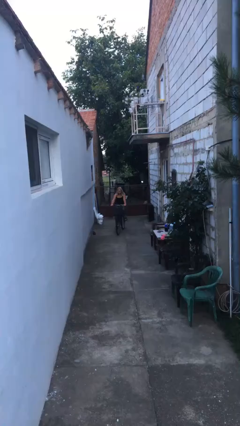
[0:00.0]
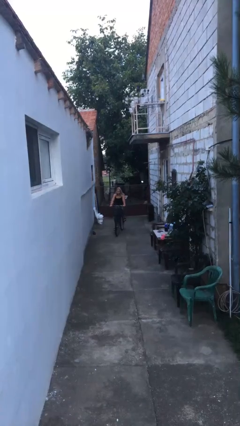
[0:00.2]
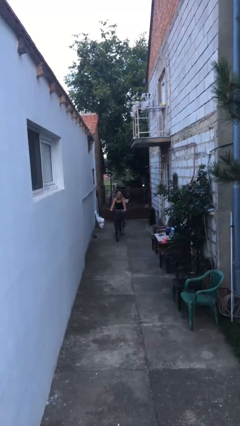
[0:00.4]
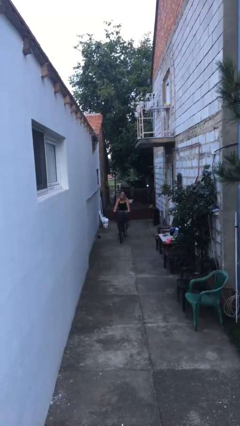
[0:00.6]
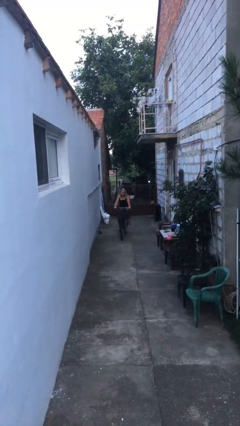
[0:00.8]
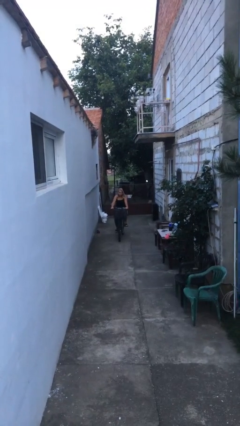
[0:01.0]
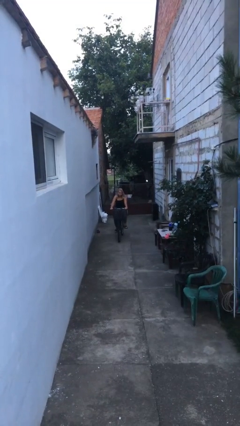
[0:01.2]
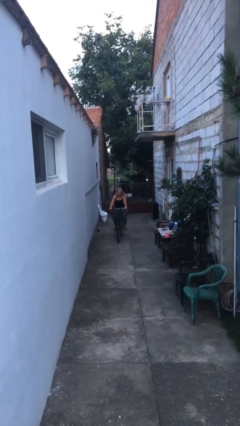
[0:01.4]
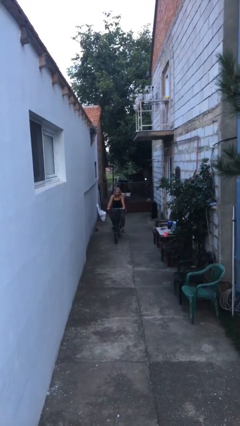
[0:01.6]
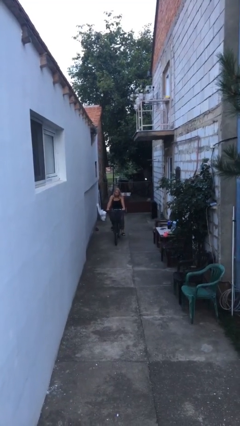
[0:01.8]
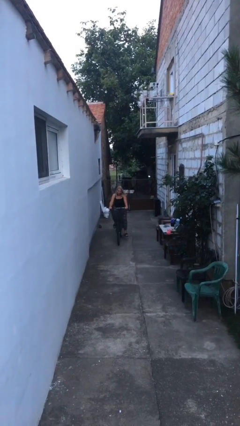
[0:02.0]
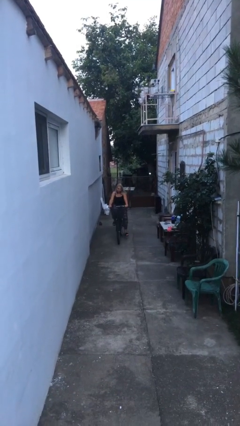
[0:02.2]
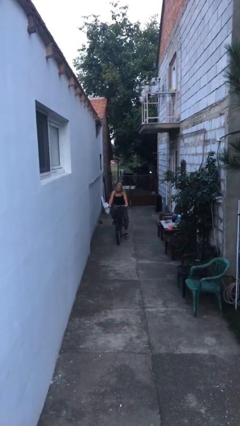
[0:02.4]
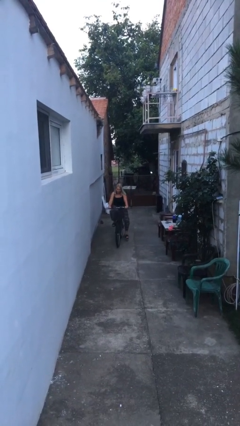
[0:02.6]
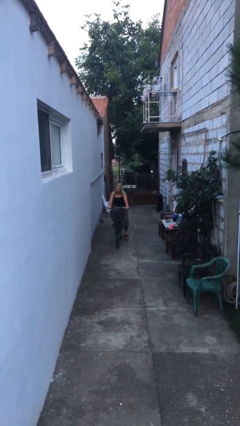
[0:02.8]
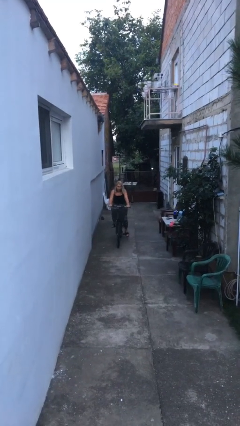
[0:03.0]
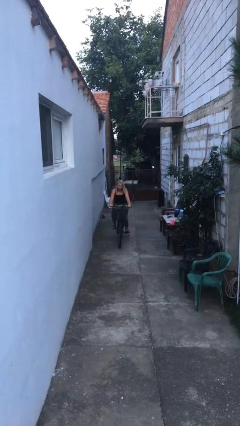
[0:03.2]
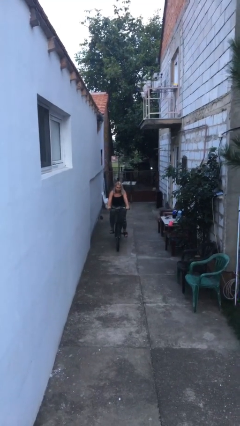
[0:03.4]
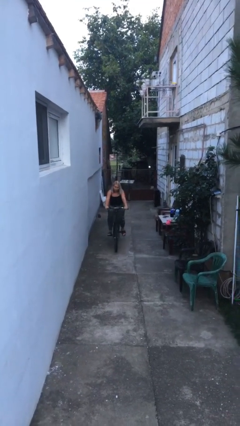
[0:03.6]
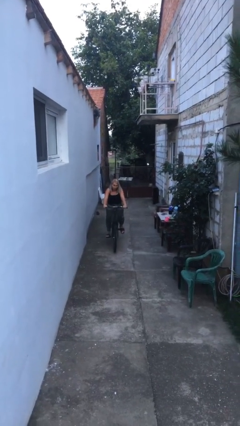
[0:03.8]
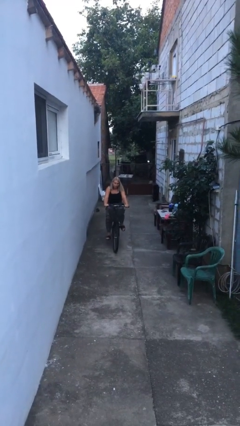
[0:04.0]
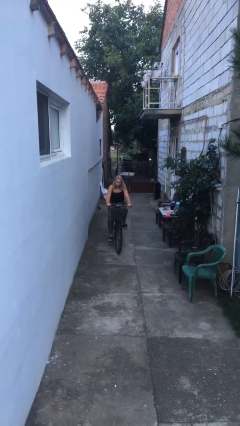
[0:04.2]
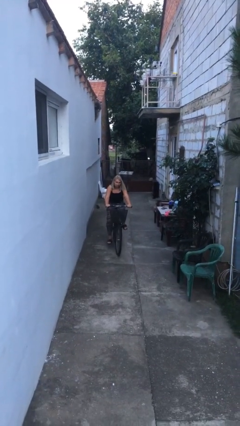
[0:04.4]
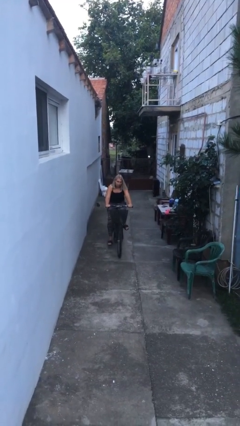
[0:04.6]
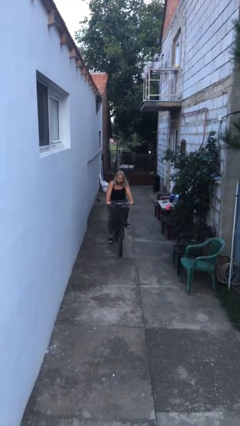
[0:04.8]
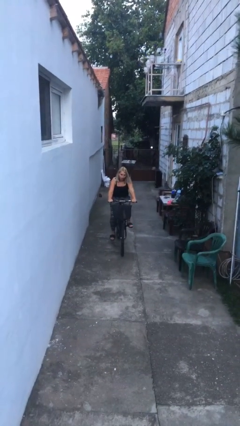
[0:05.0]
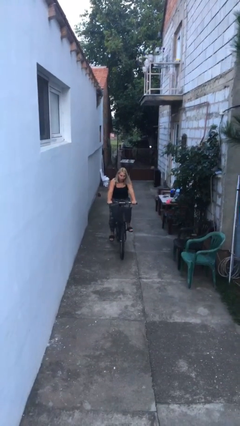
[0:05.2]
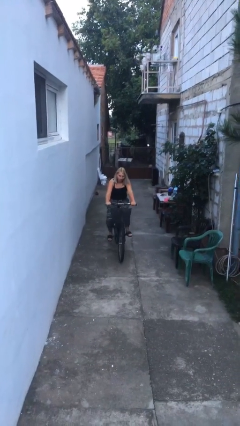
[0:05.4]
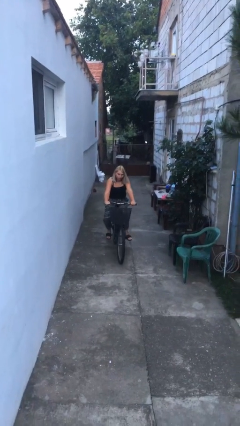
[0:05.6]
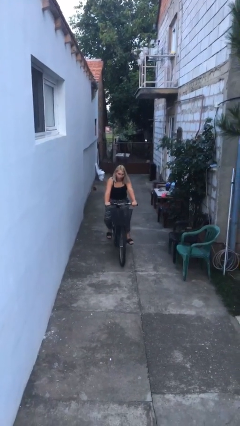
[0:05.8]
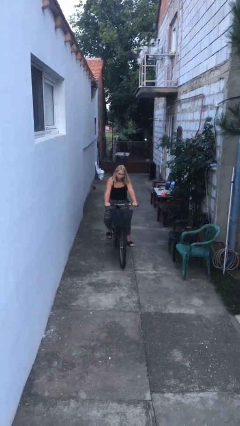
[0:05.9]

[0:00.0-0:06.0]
person rides bicycle

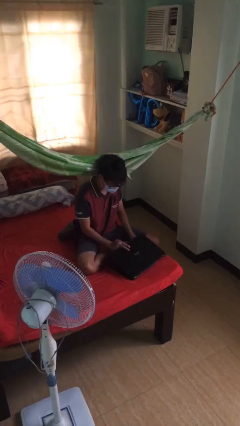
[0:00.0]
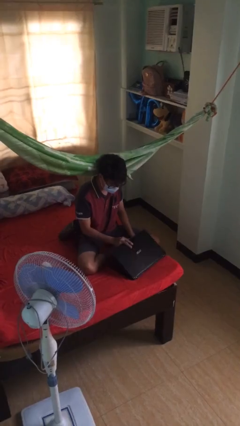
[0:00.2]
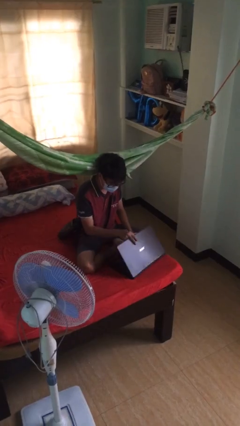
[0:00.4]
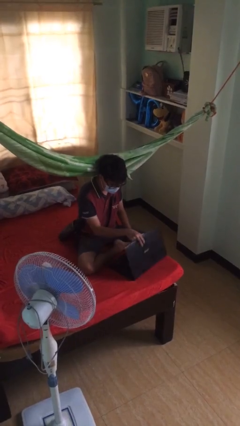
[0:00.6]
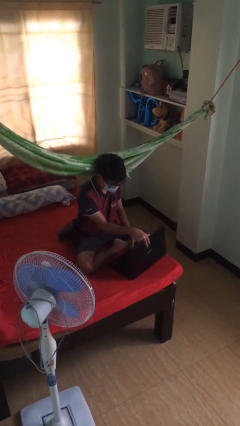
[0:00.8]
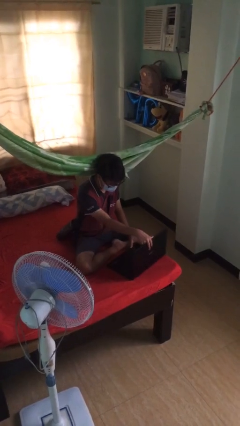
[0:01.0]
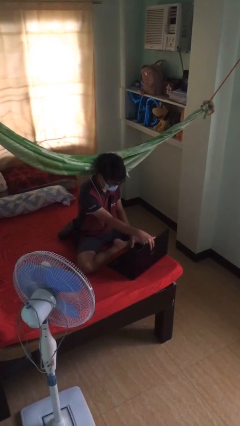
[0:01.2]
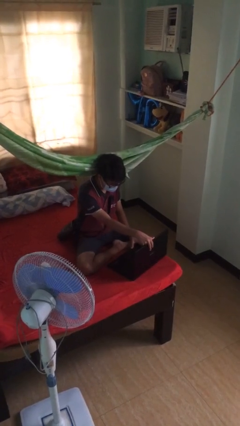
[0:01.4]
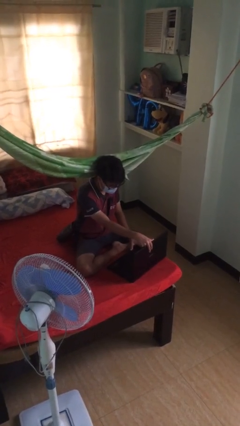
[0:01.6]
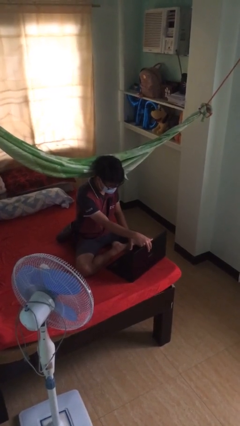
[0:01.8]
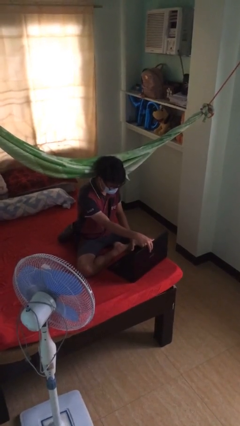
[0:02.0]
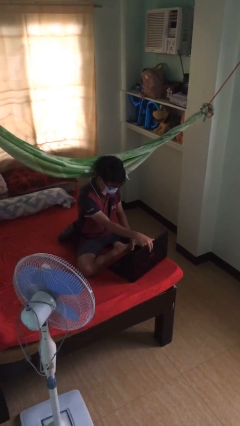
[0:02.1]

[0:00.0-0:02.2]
person interacts with laptop

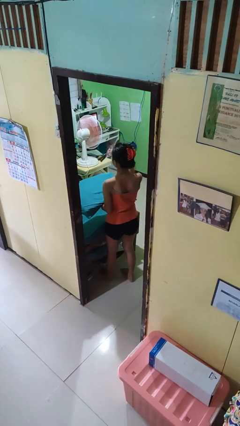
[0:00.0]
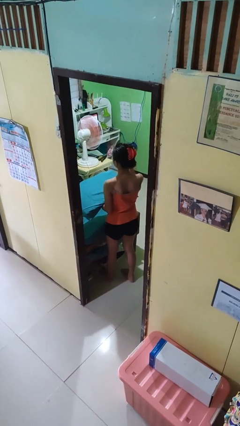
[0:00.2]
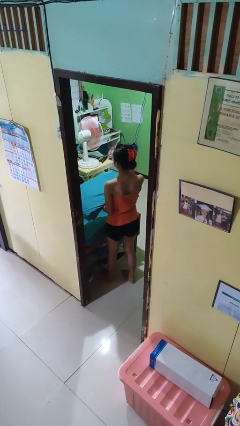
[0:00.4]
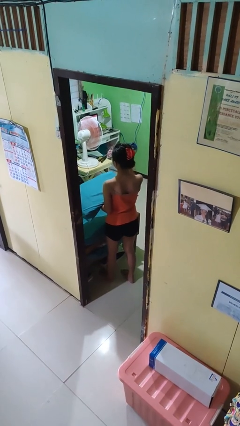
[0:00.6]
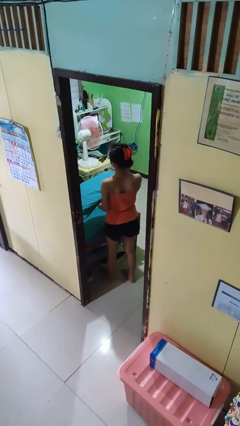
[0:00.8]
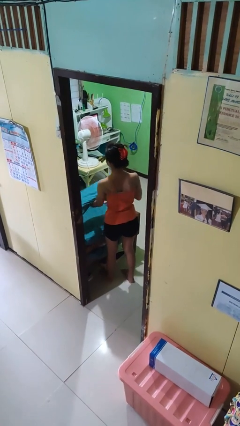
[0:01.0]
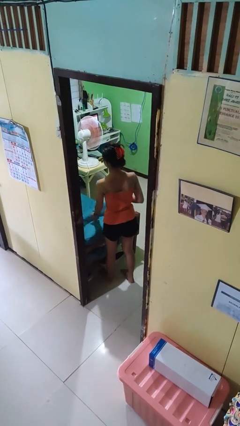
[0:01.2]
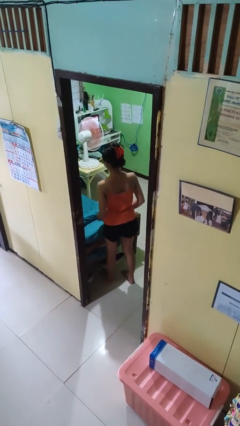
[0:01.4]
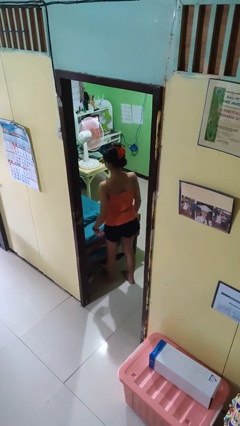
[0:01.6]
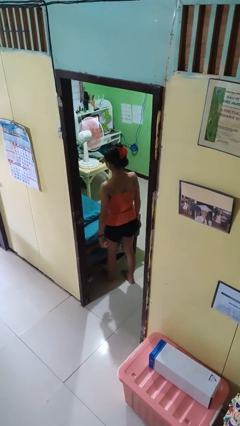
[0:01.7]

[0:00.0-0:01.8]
person puts down object on bed

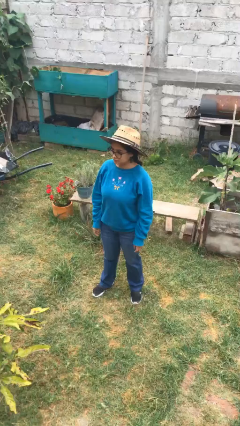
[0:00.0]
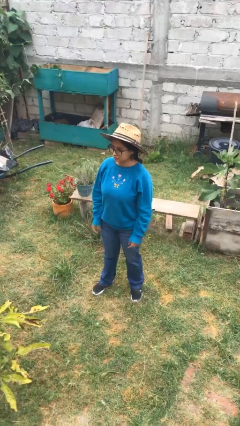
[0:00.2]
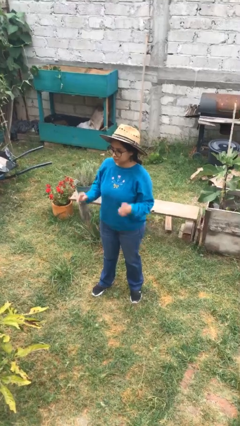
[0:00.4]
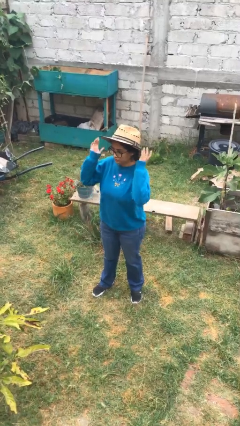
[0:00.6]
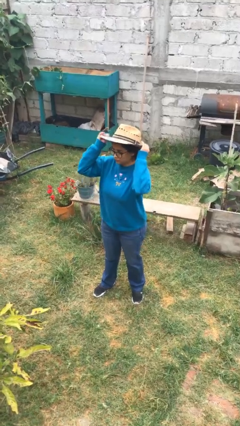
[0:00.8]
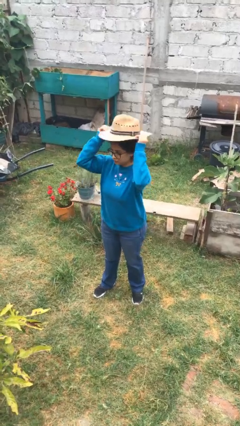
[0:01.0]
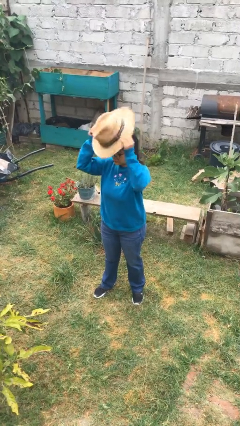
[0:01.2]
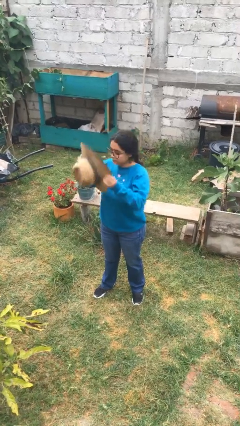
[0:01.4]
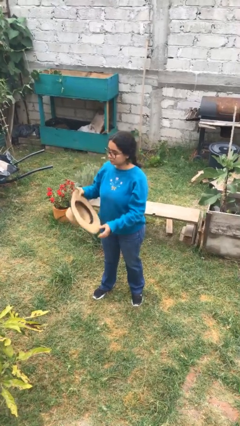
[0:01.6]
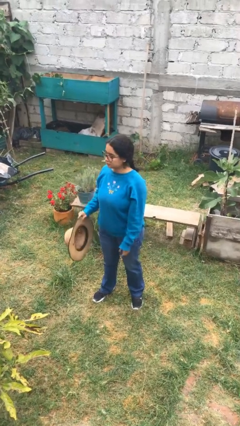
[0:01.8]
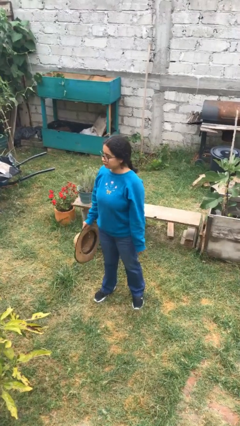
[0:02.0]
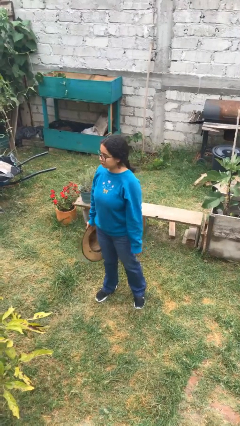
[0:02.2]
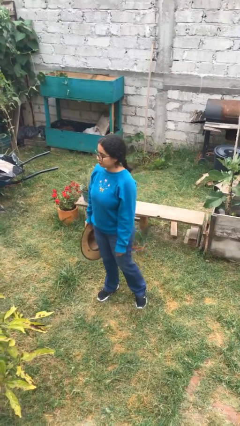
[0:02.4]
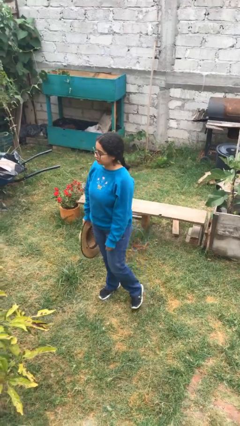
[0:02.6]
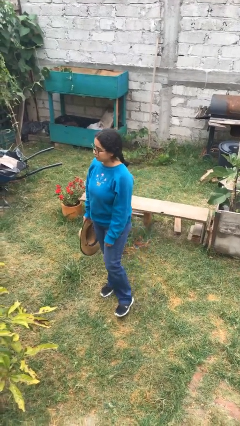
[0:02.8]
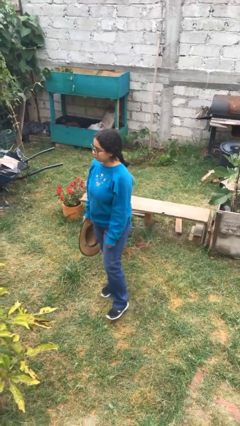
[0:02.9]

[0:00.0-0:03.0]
person takes off hat

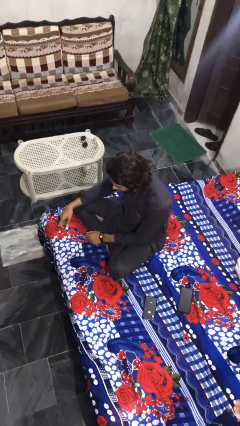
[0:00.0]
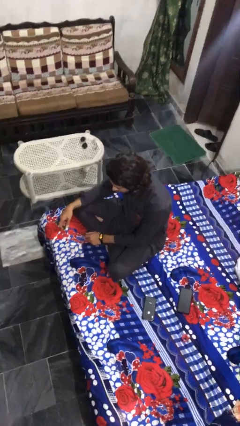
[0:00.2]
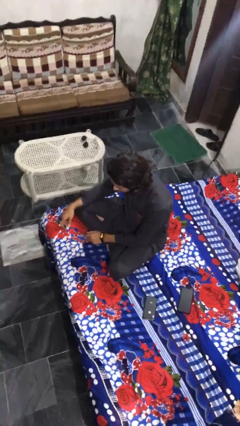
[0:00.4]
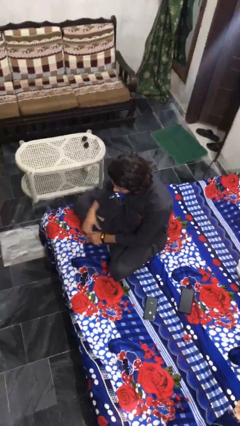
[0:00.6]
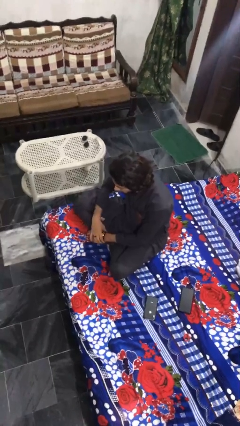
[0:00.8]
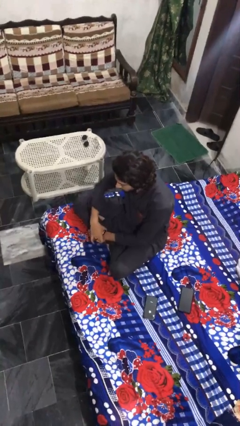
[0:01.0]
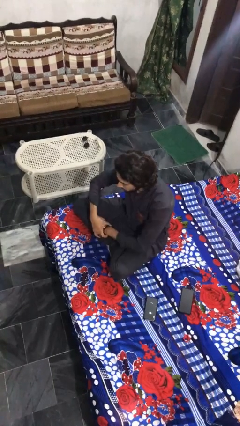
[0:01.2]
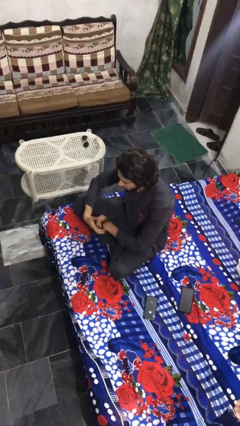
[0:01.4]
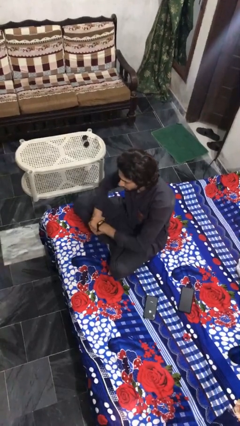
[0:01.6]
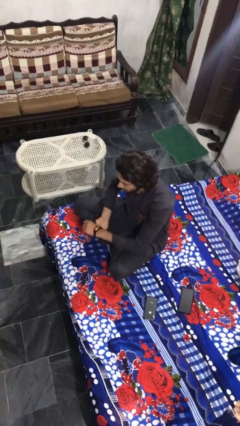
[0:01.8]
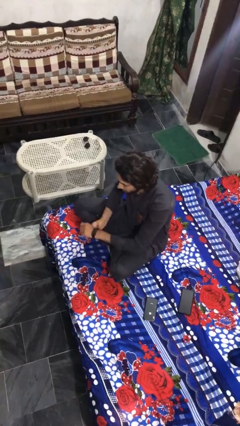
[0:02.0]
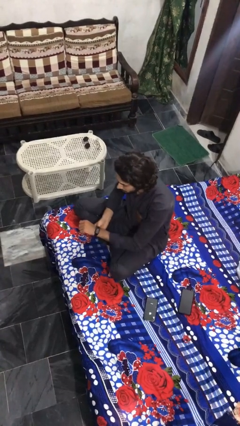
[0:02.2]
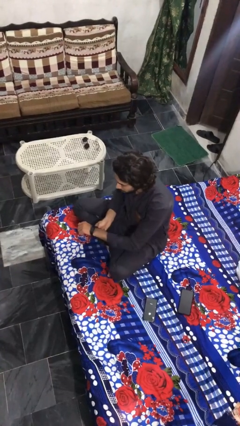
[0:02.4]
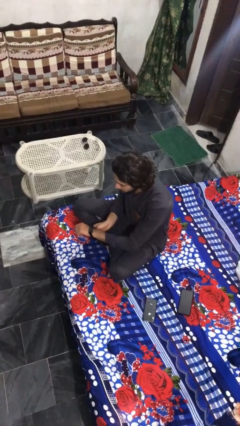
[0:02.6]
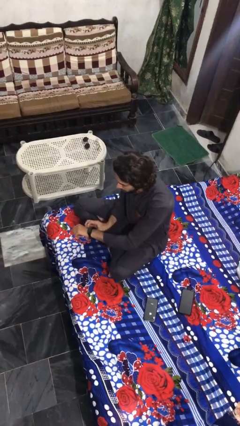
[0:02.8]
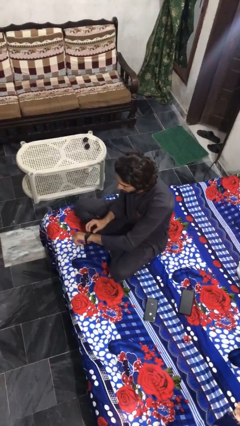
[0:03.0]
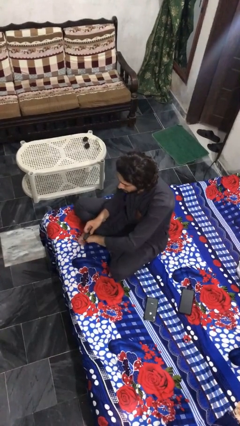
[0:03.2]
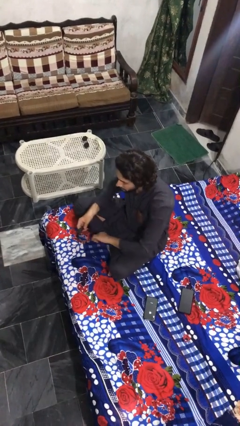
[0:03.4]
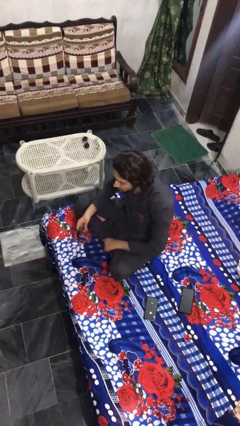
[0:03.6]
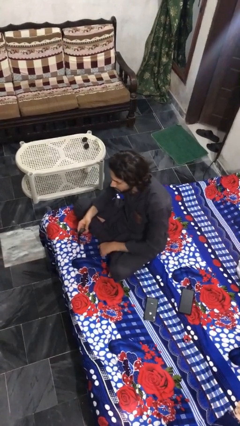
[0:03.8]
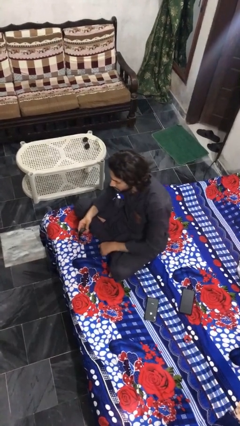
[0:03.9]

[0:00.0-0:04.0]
person takes off wristwatch

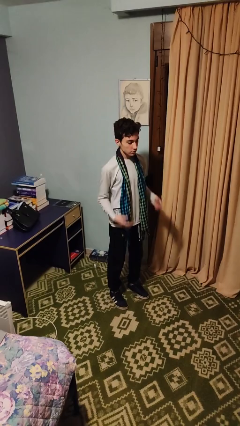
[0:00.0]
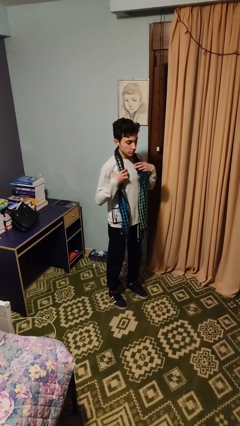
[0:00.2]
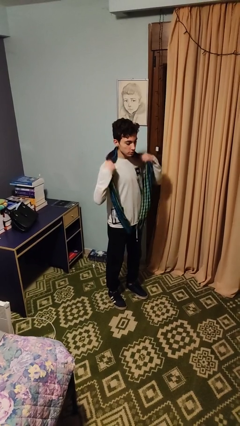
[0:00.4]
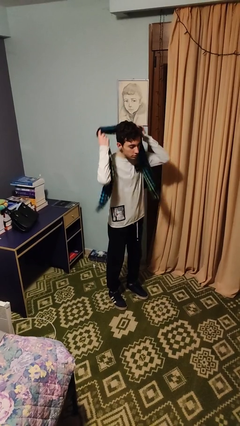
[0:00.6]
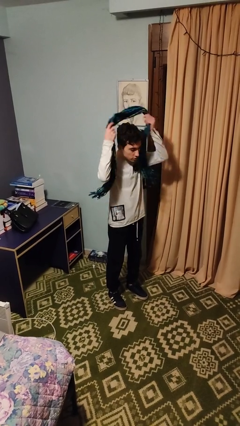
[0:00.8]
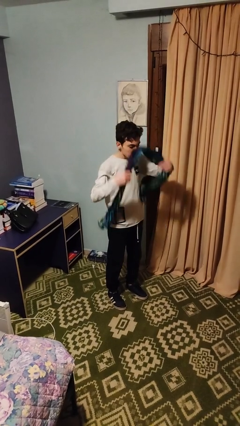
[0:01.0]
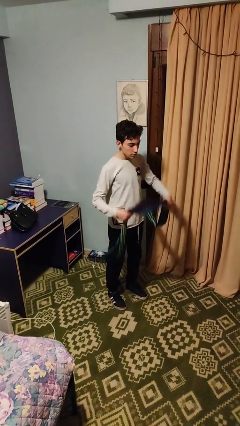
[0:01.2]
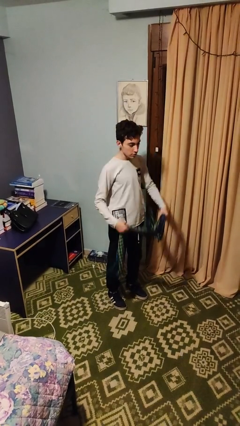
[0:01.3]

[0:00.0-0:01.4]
person takes off scarf
